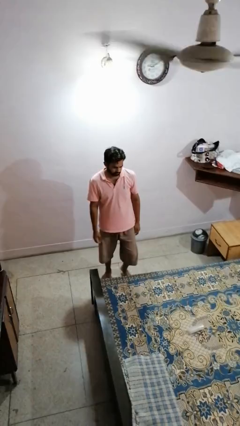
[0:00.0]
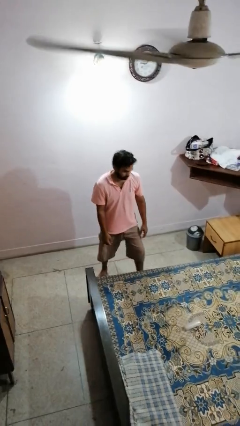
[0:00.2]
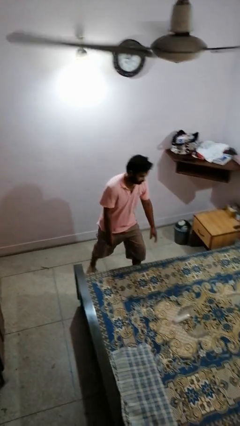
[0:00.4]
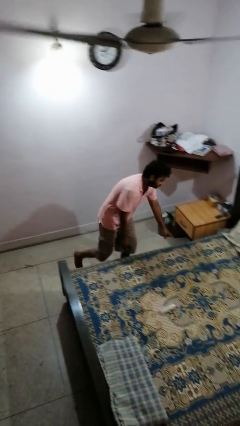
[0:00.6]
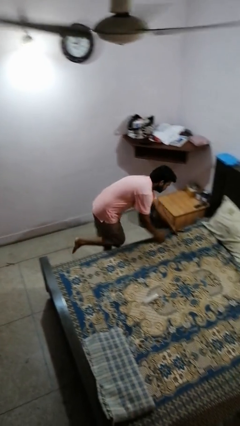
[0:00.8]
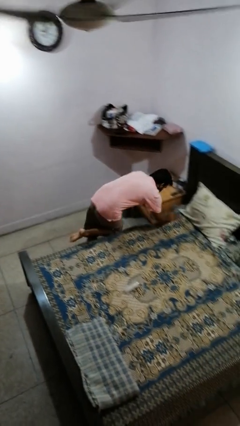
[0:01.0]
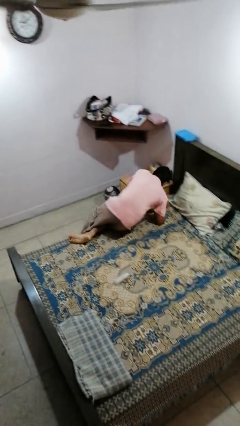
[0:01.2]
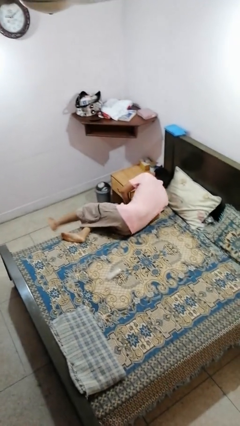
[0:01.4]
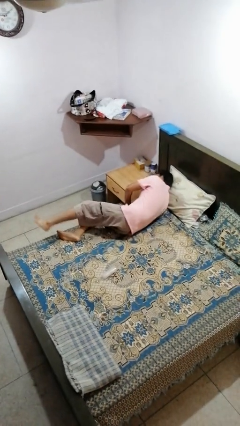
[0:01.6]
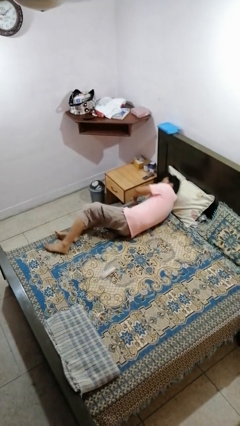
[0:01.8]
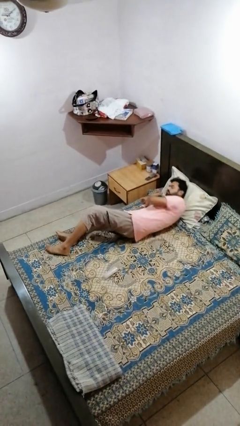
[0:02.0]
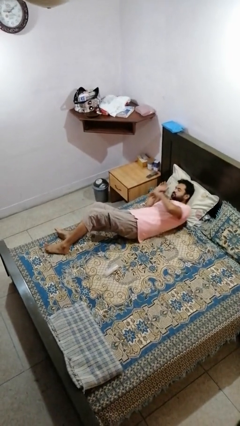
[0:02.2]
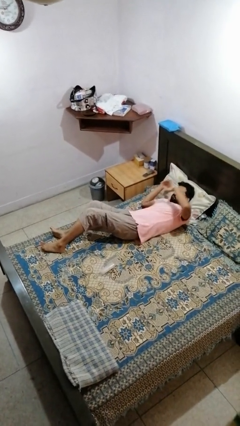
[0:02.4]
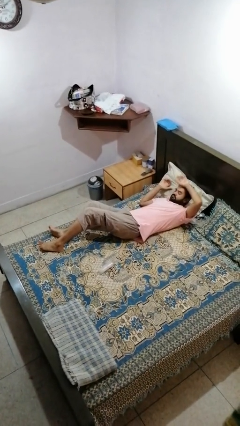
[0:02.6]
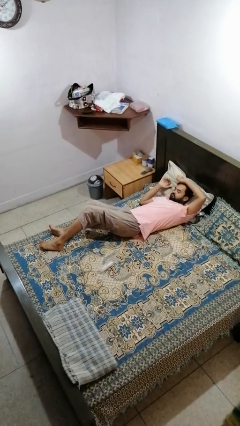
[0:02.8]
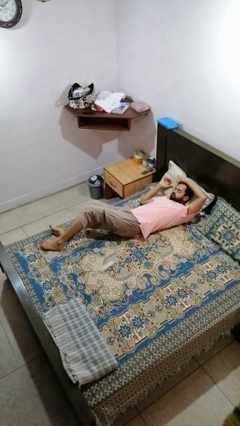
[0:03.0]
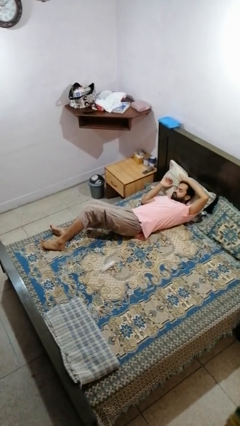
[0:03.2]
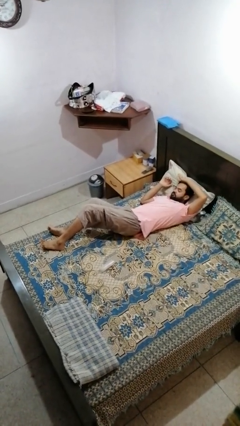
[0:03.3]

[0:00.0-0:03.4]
person lies down on bed

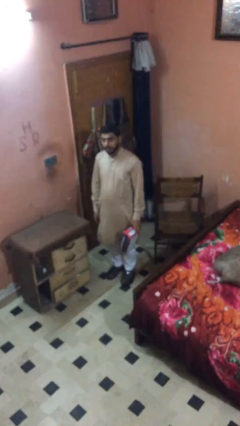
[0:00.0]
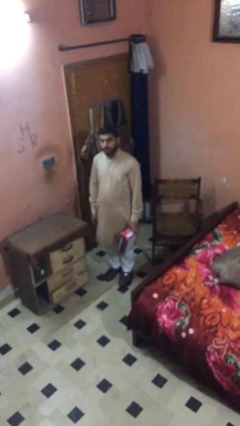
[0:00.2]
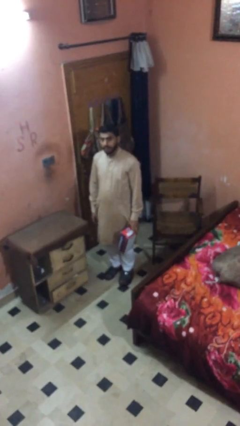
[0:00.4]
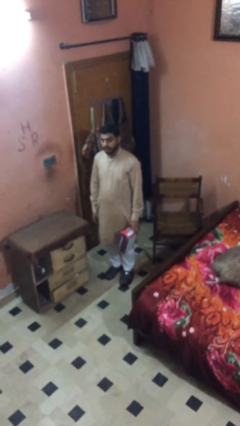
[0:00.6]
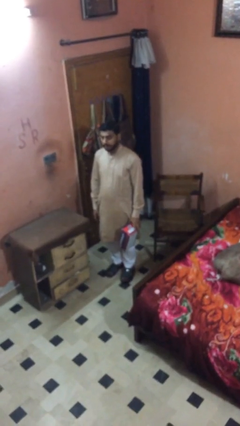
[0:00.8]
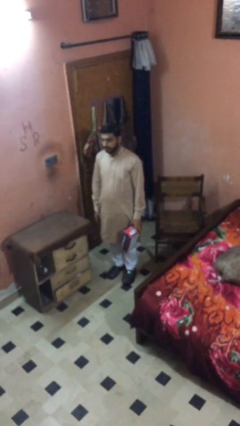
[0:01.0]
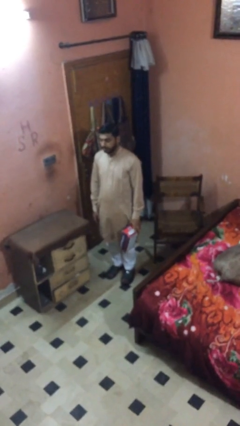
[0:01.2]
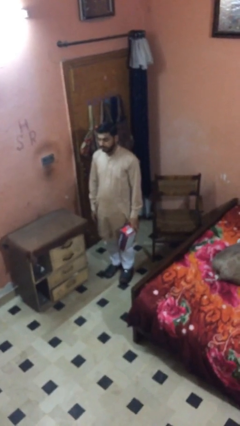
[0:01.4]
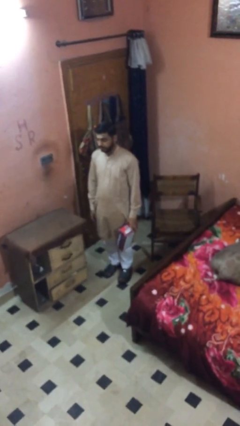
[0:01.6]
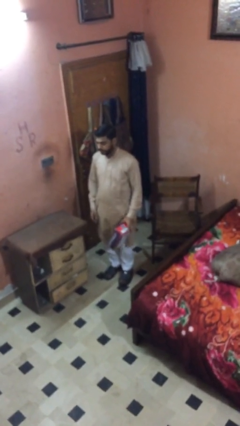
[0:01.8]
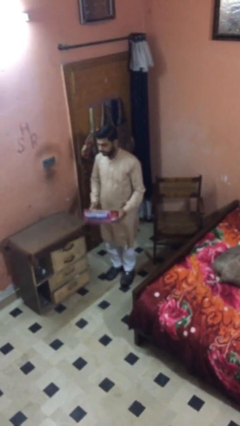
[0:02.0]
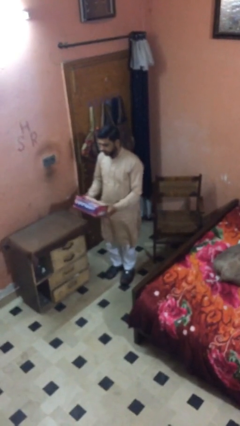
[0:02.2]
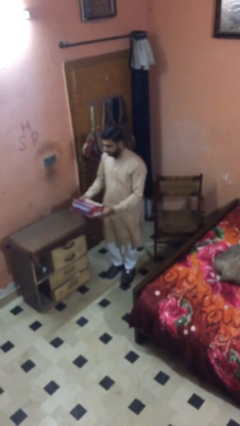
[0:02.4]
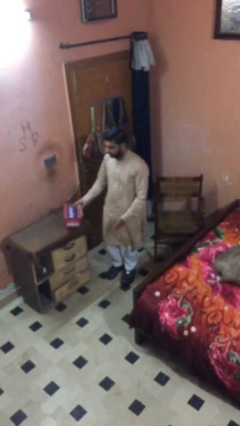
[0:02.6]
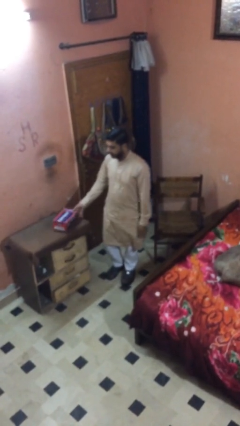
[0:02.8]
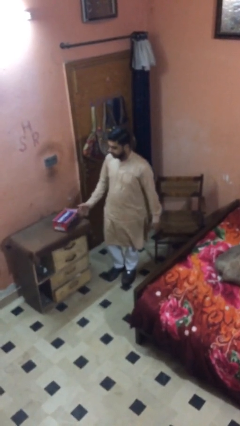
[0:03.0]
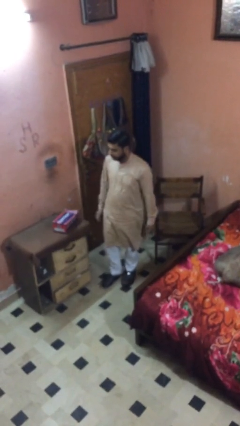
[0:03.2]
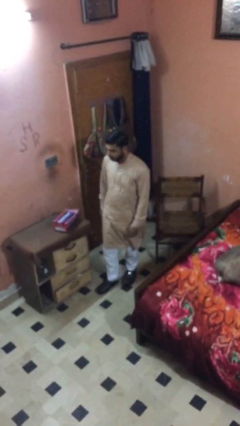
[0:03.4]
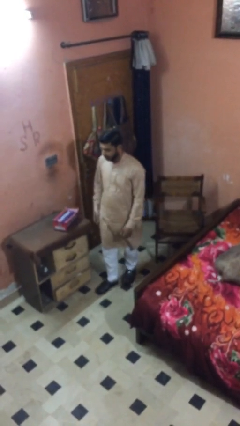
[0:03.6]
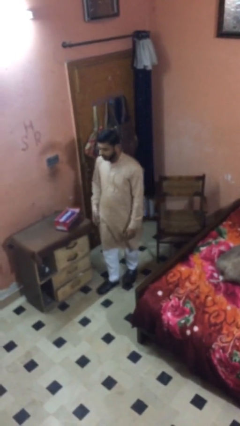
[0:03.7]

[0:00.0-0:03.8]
person puts down object on table

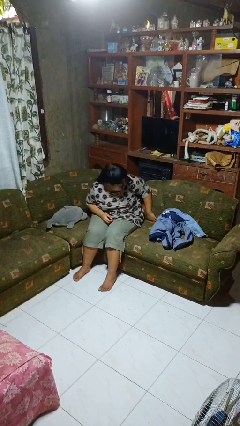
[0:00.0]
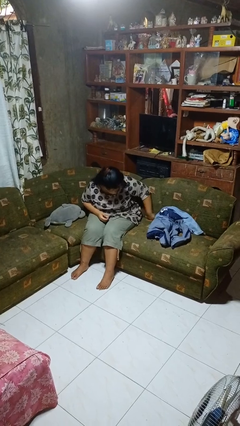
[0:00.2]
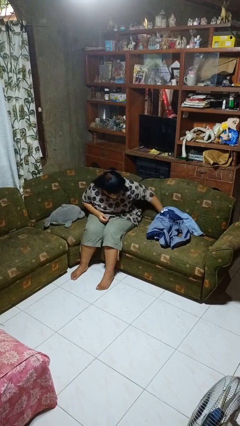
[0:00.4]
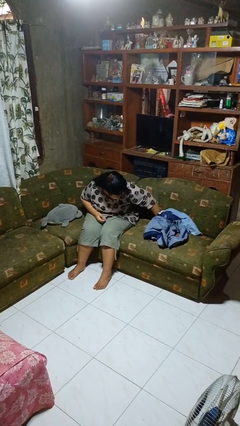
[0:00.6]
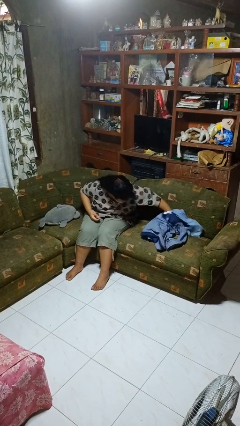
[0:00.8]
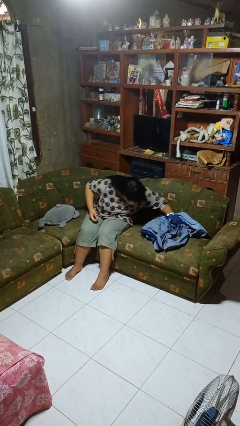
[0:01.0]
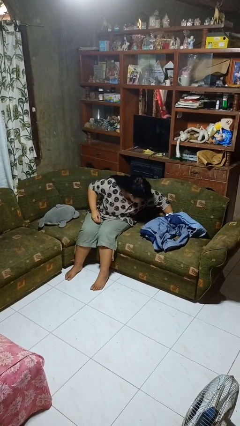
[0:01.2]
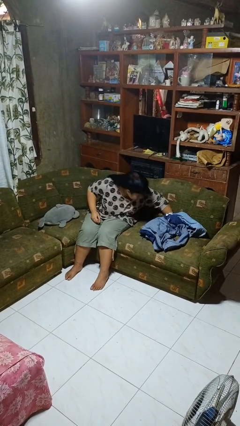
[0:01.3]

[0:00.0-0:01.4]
person searches in couch

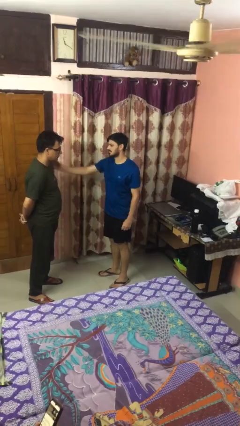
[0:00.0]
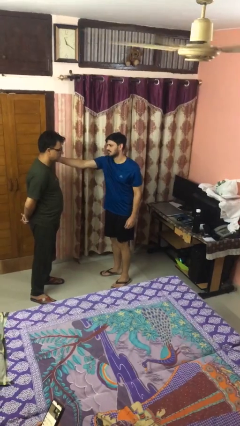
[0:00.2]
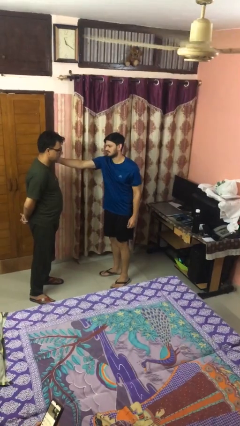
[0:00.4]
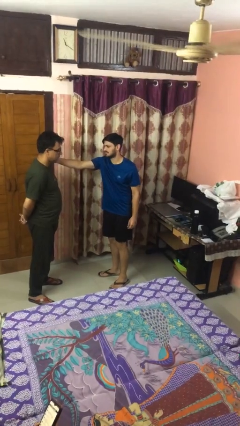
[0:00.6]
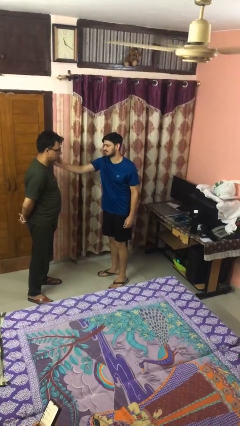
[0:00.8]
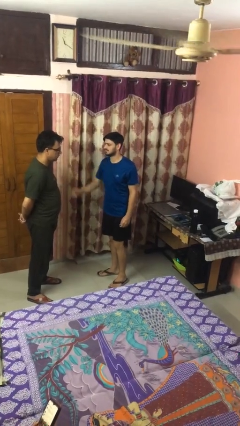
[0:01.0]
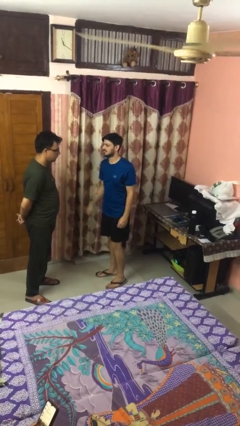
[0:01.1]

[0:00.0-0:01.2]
person touches face of person

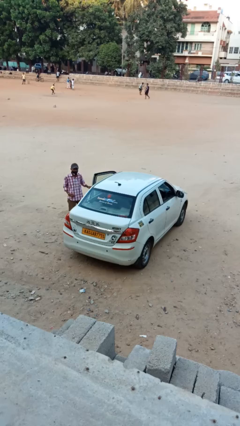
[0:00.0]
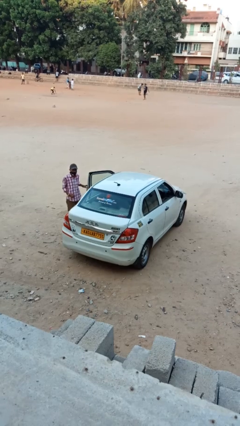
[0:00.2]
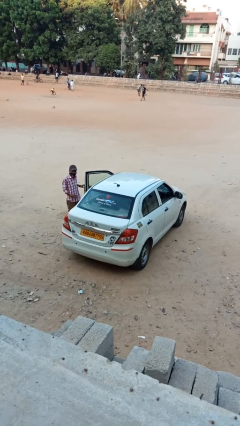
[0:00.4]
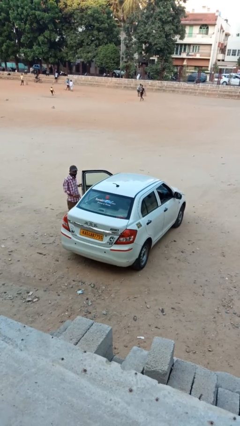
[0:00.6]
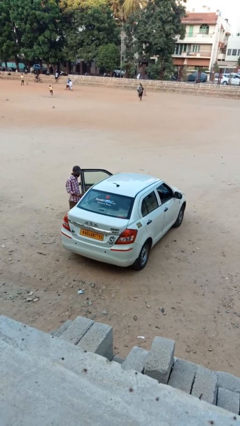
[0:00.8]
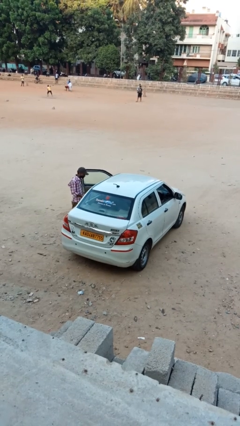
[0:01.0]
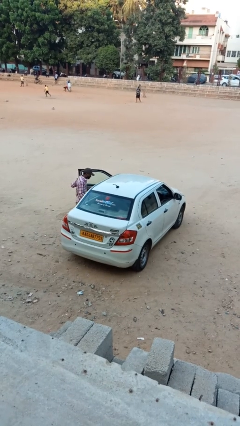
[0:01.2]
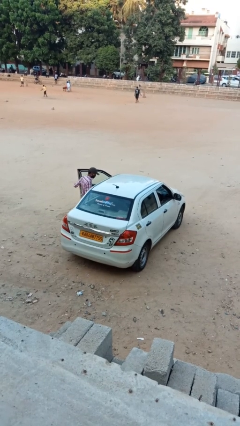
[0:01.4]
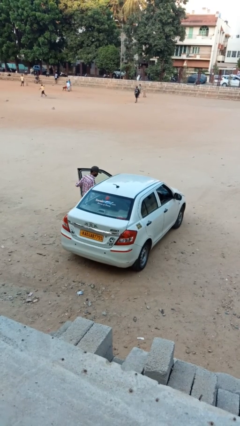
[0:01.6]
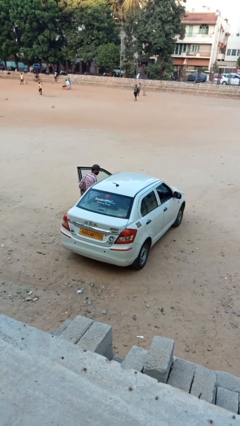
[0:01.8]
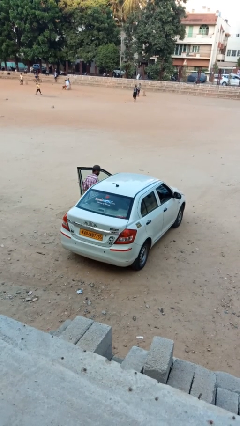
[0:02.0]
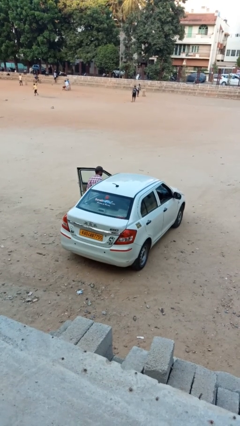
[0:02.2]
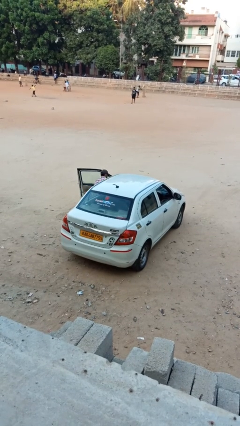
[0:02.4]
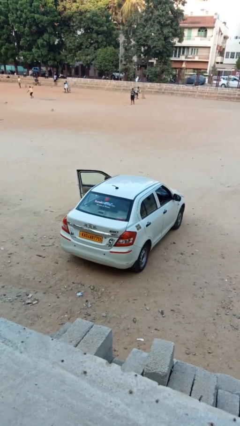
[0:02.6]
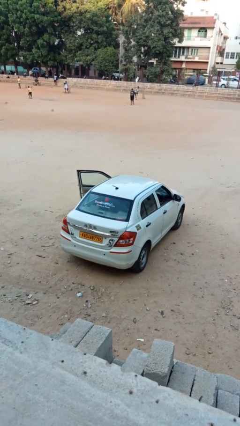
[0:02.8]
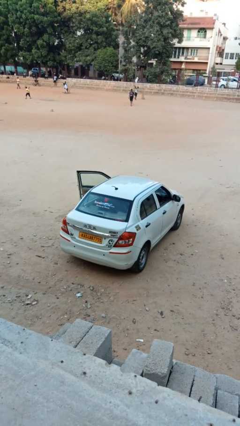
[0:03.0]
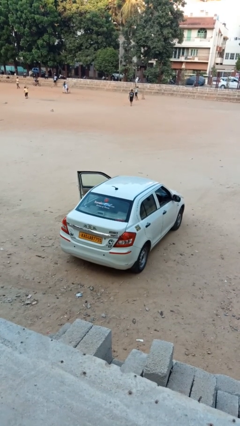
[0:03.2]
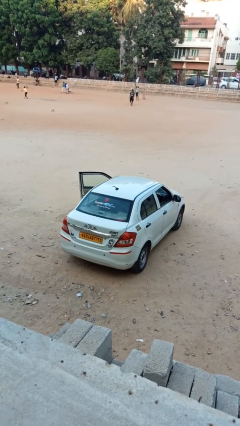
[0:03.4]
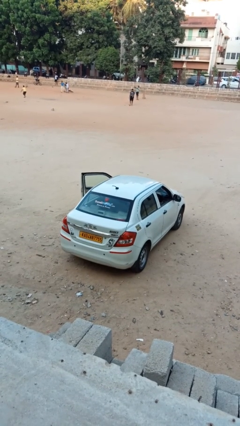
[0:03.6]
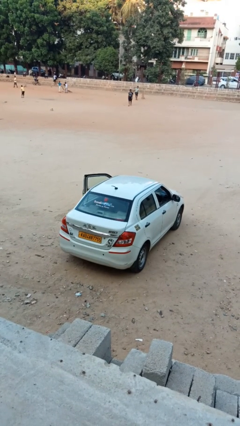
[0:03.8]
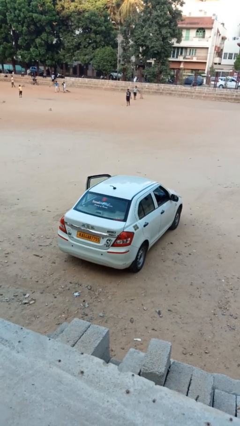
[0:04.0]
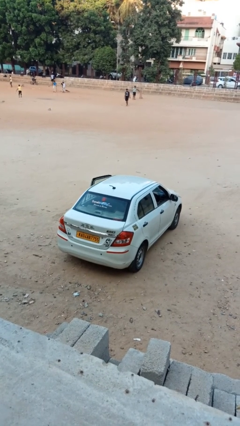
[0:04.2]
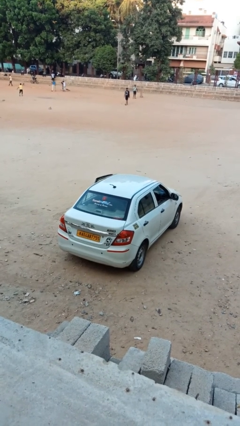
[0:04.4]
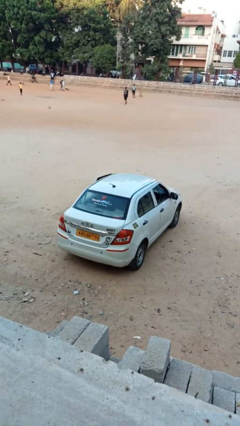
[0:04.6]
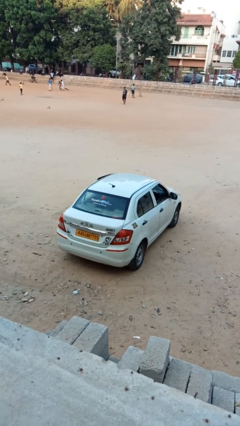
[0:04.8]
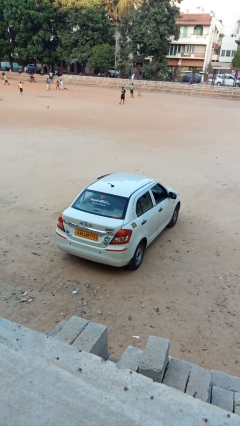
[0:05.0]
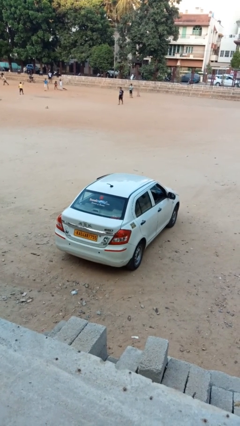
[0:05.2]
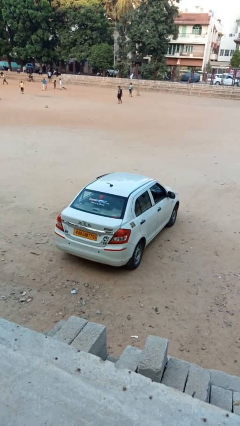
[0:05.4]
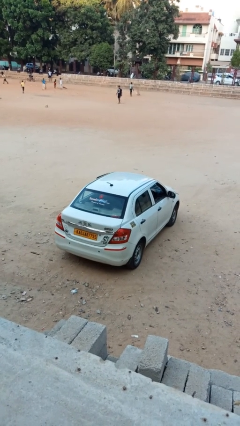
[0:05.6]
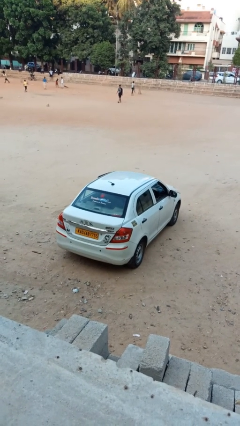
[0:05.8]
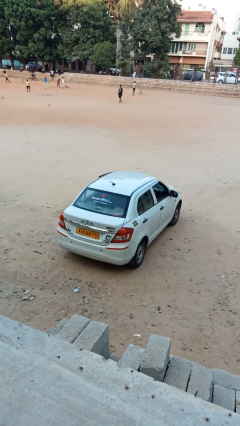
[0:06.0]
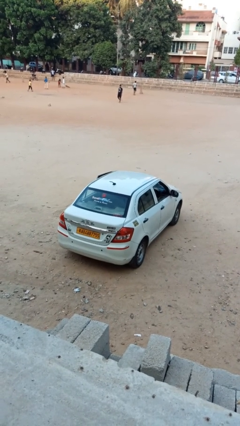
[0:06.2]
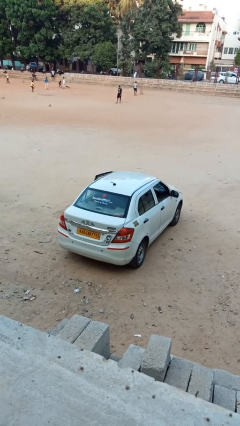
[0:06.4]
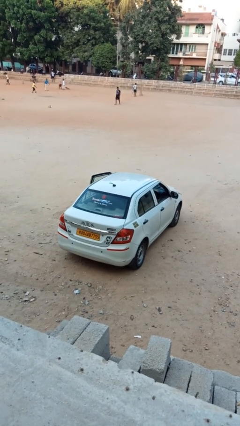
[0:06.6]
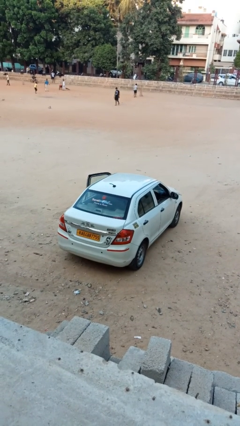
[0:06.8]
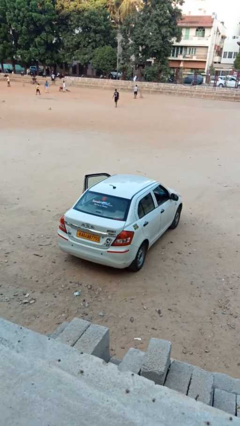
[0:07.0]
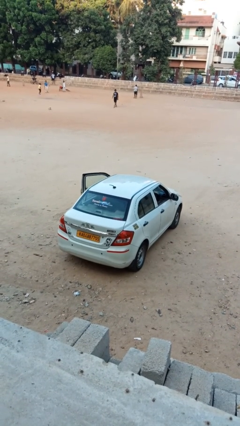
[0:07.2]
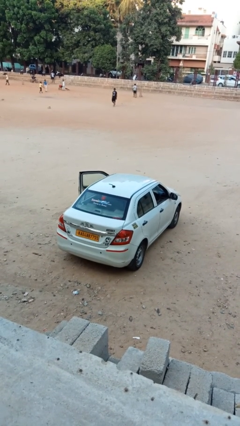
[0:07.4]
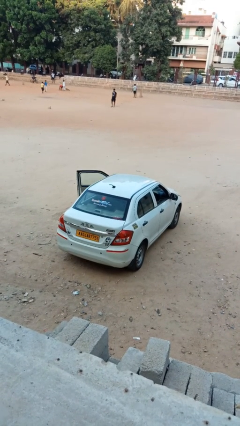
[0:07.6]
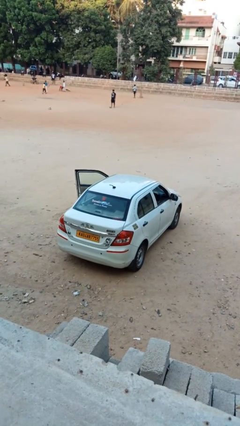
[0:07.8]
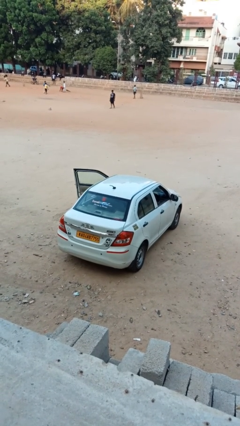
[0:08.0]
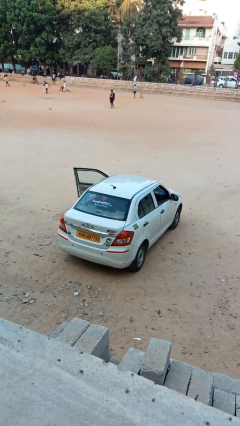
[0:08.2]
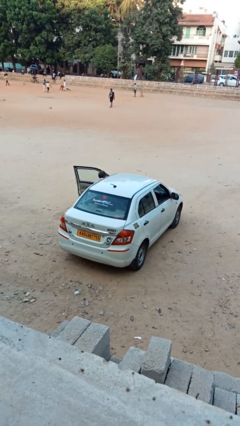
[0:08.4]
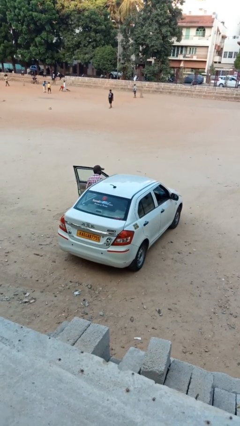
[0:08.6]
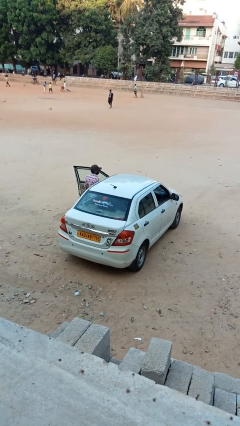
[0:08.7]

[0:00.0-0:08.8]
car picks up person
